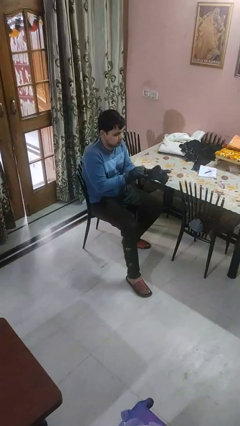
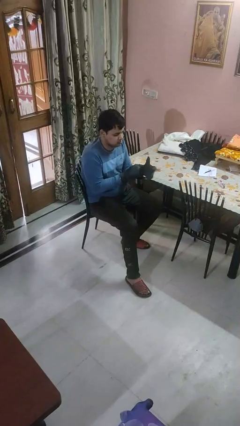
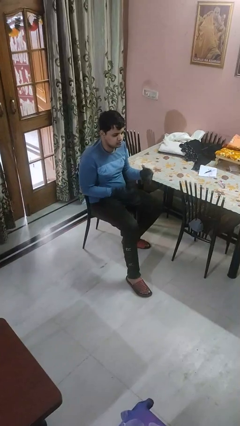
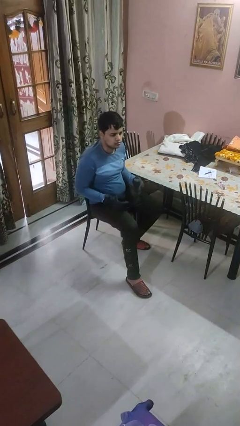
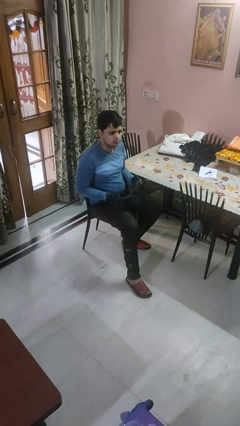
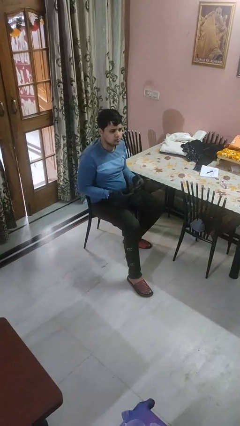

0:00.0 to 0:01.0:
person puts on gloves

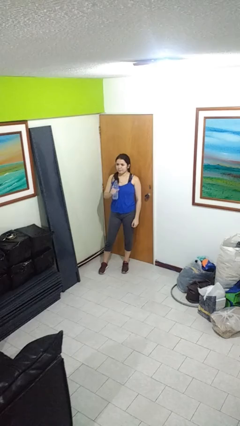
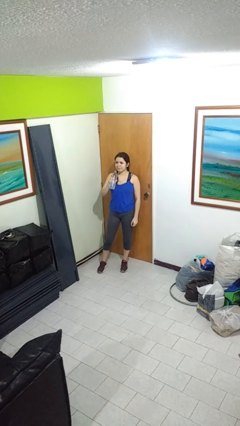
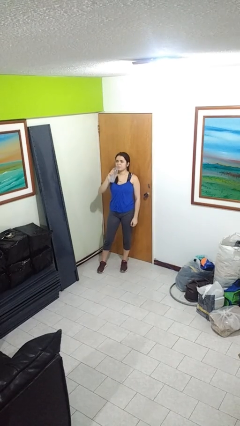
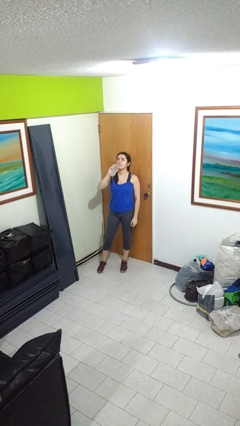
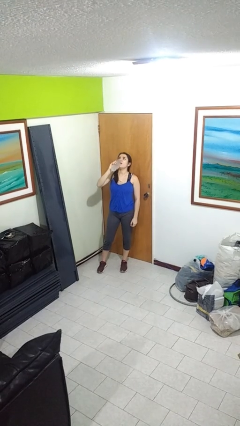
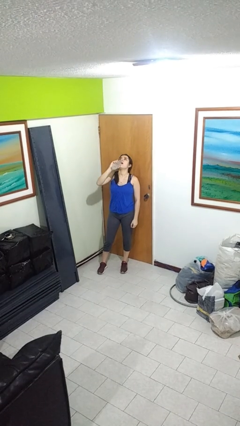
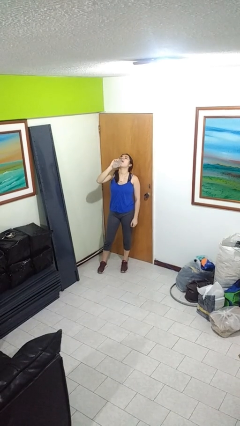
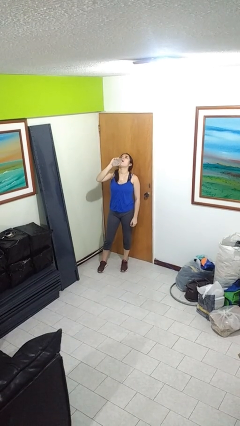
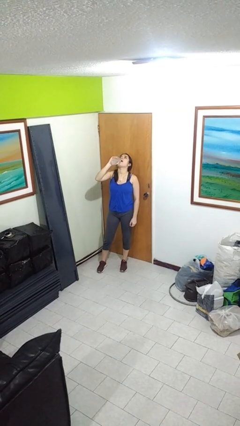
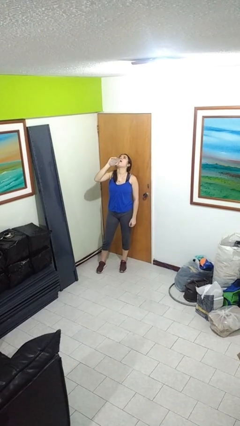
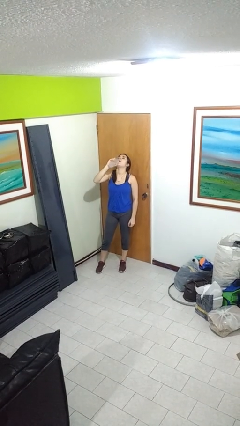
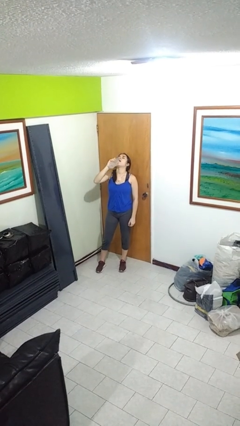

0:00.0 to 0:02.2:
person drinks from bottle

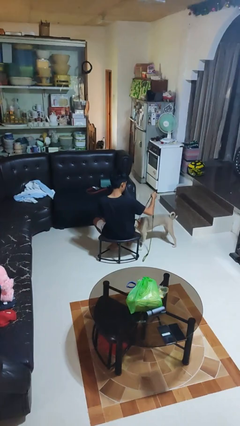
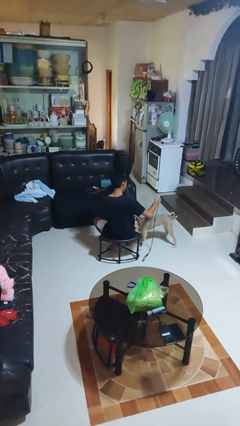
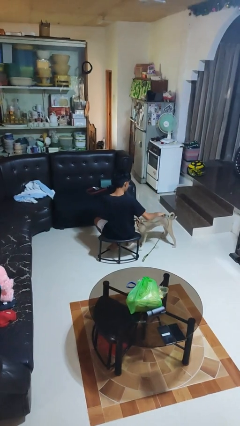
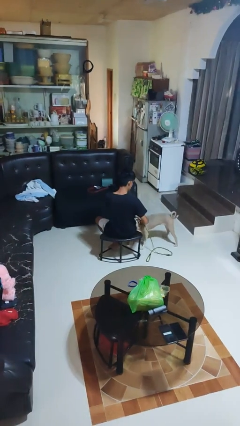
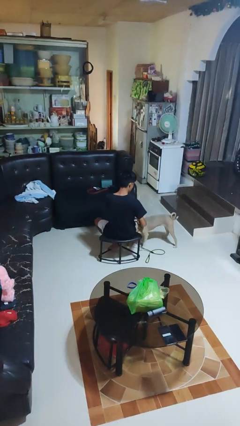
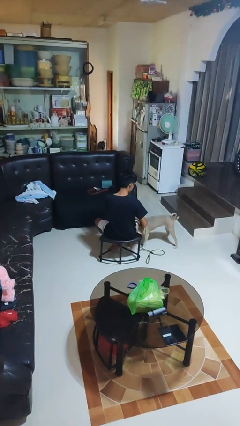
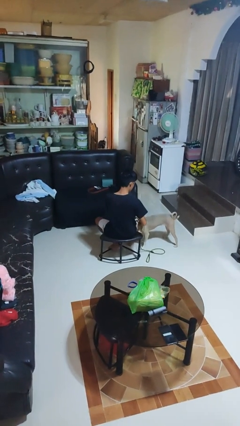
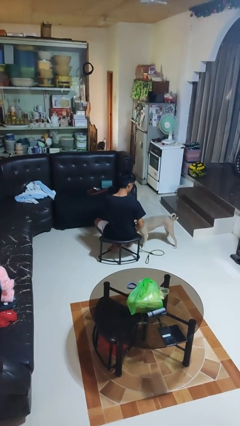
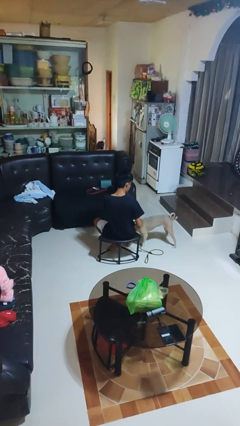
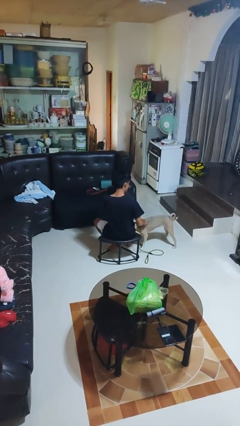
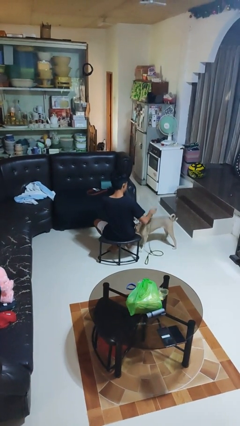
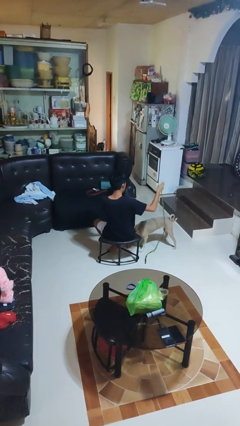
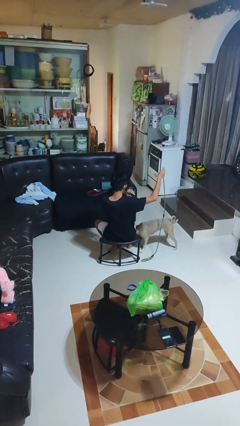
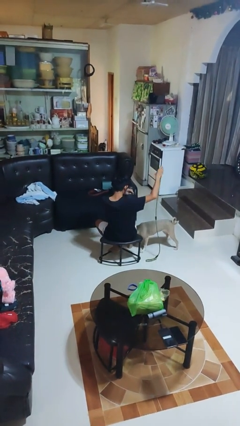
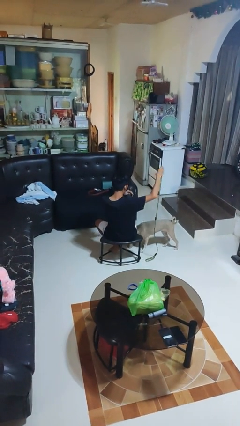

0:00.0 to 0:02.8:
person unattaches leash from dog

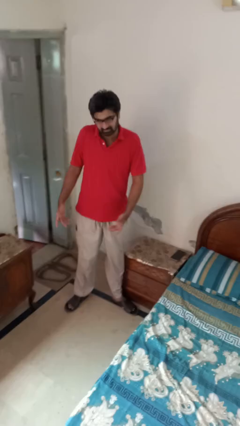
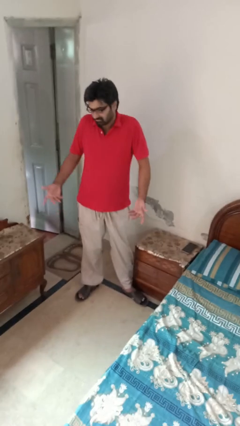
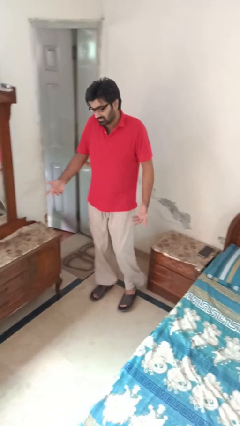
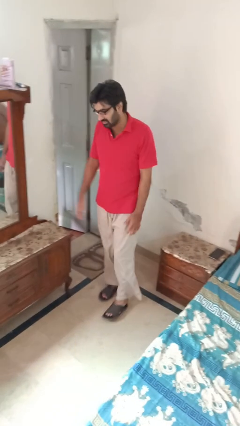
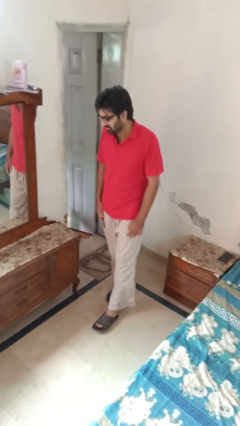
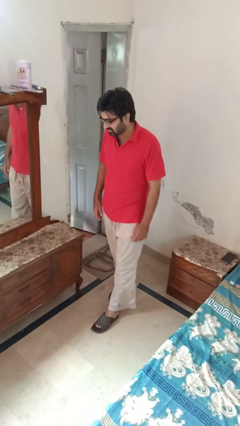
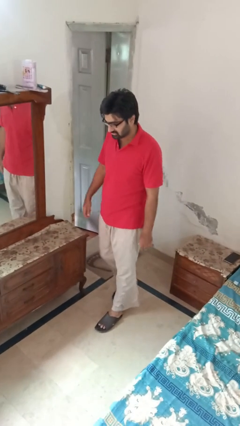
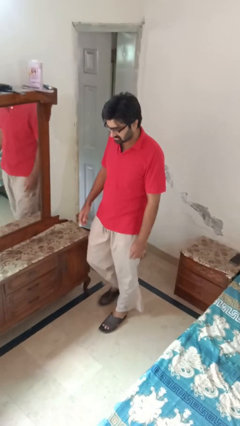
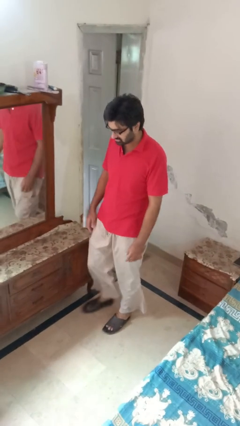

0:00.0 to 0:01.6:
person shrugs

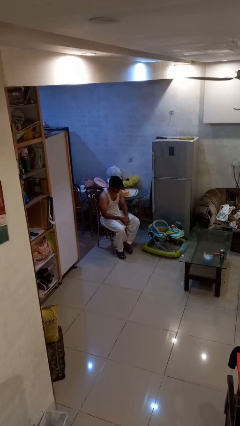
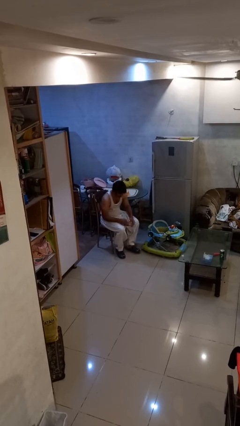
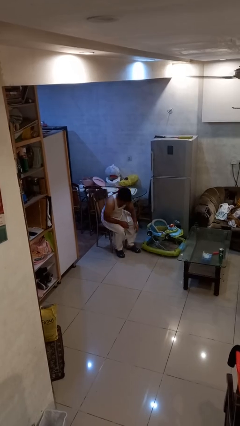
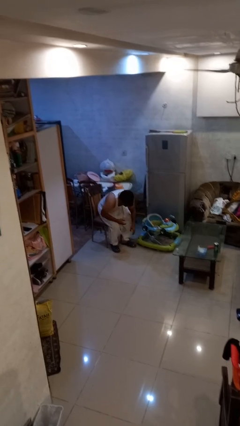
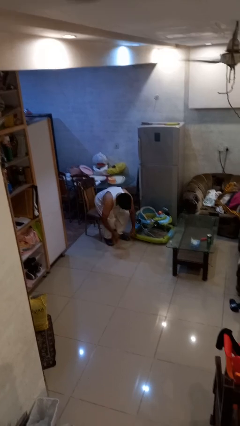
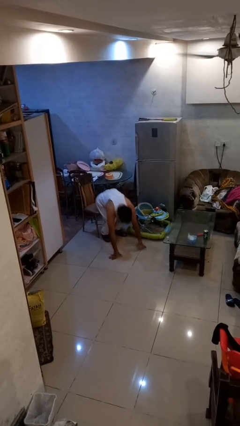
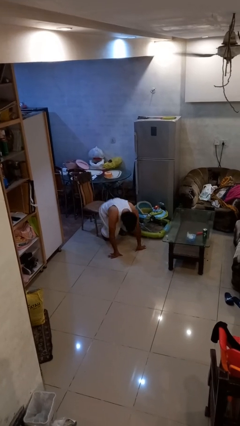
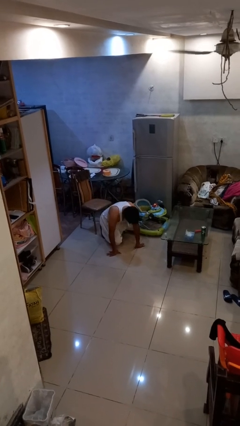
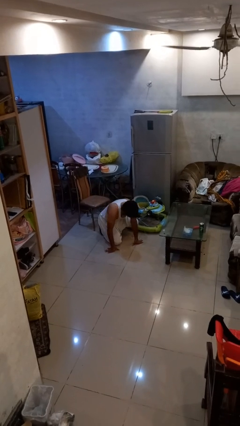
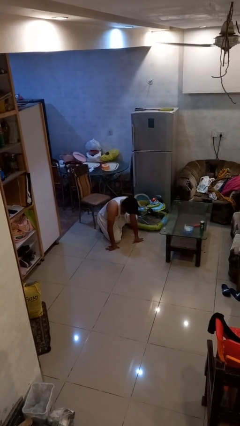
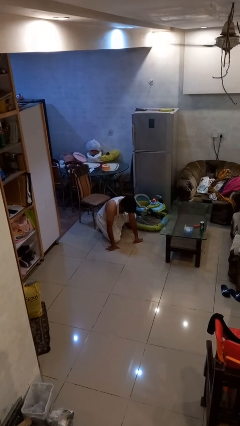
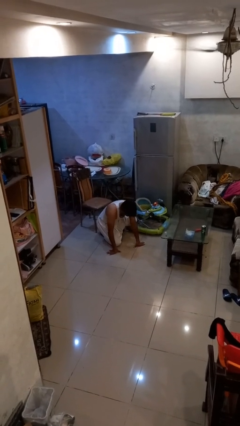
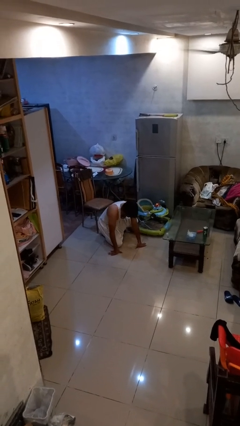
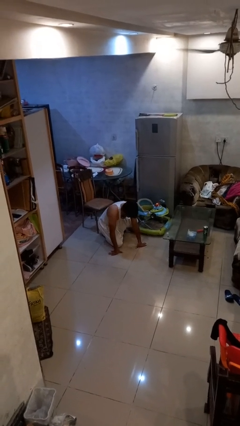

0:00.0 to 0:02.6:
person falls from chair

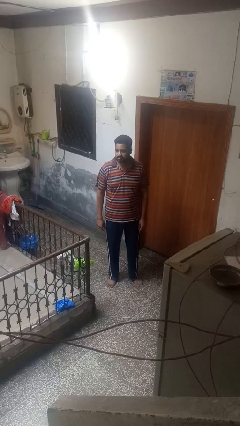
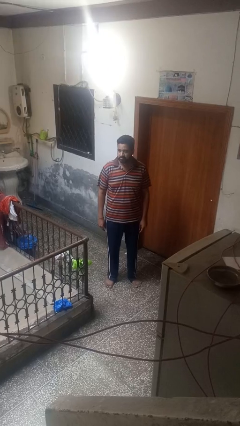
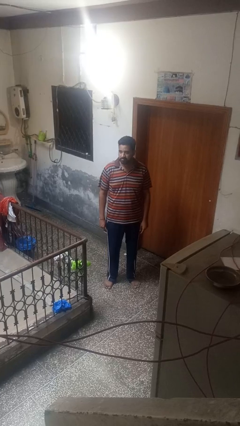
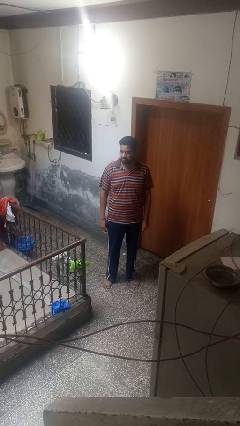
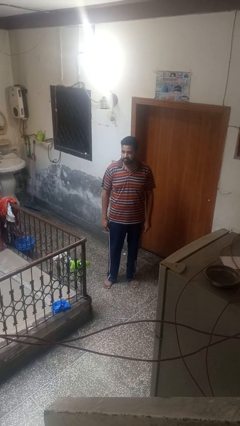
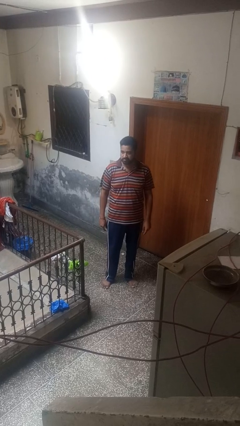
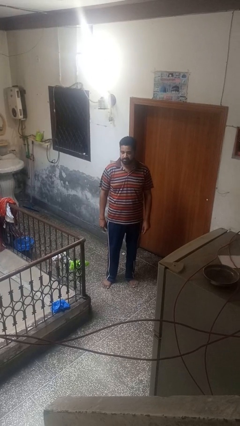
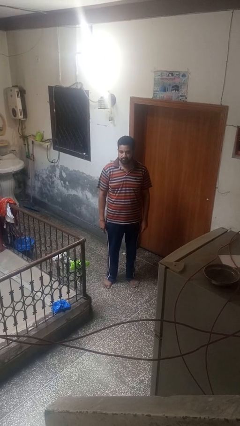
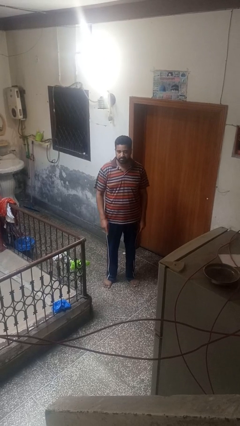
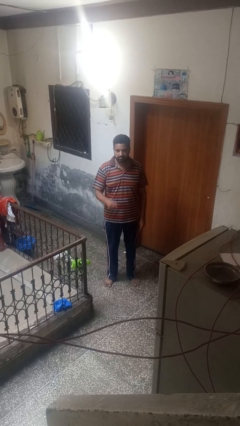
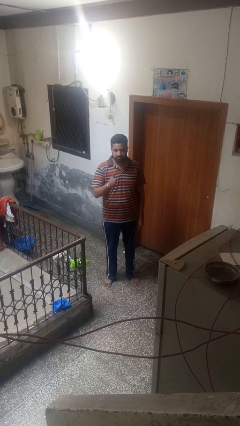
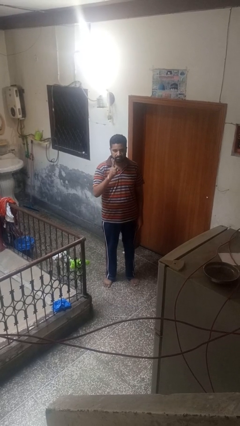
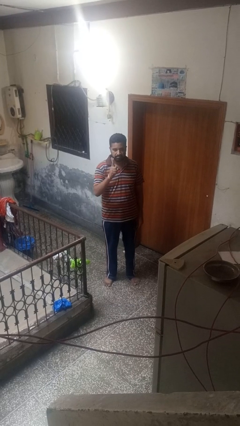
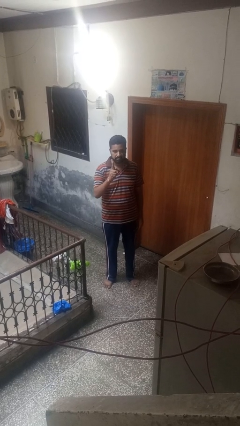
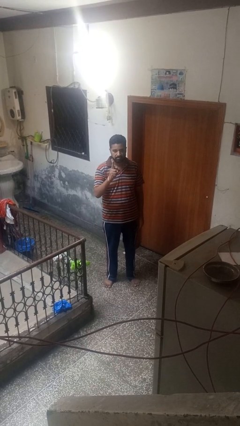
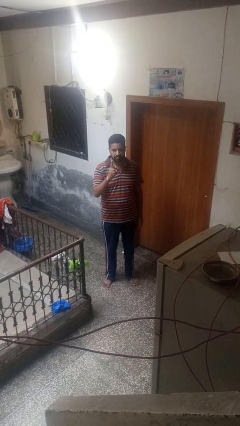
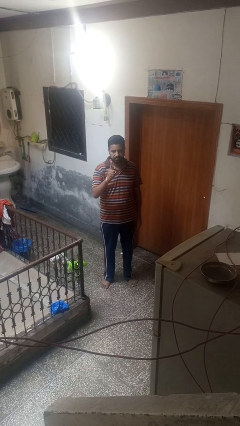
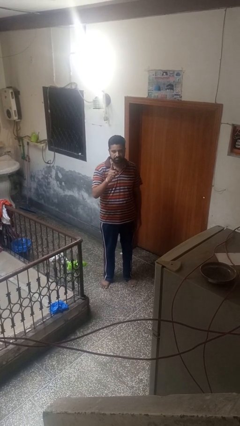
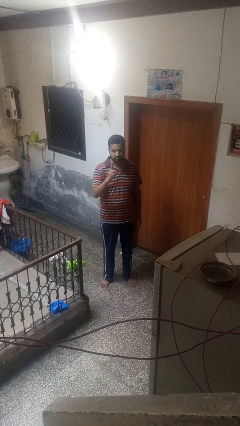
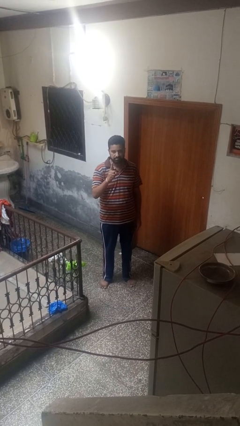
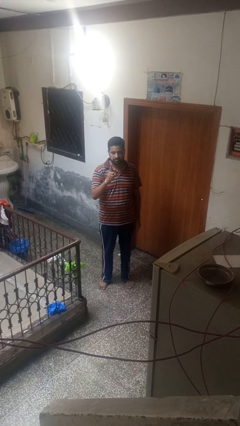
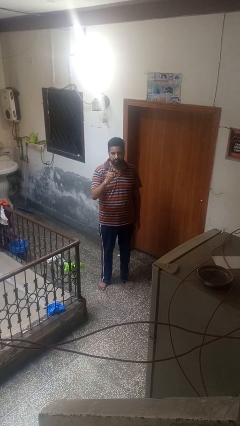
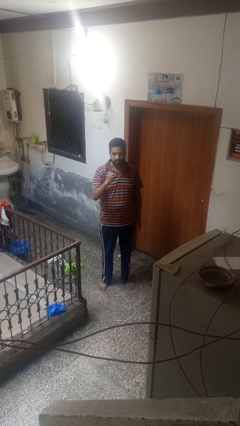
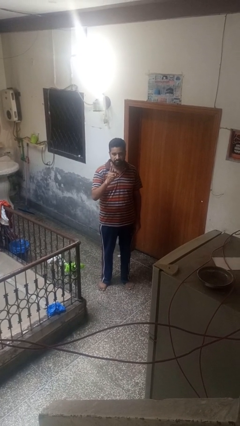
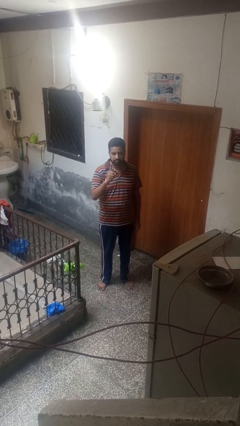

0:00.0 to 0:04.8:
person gestures number one

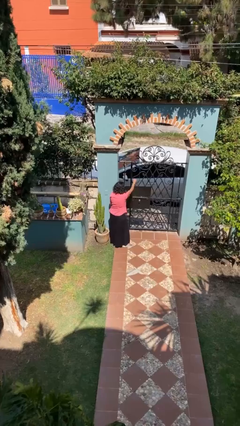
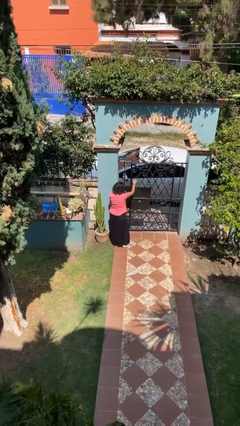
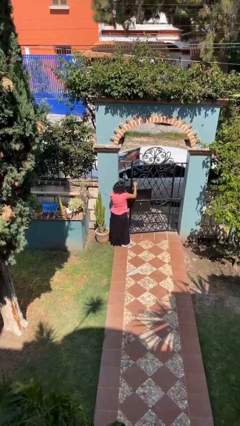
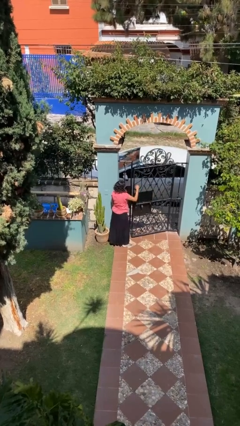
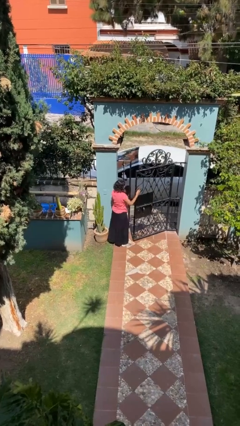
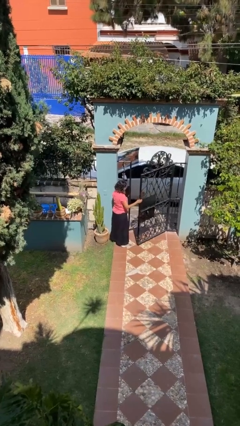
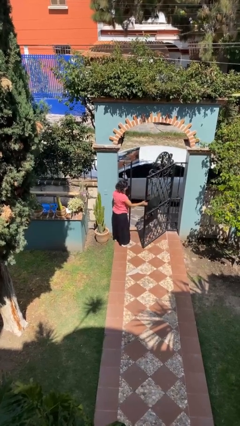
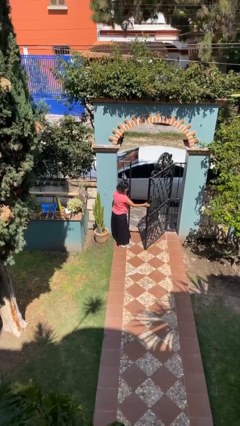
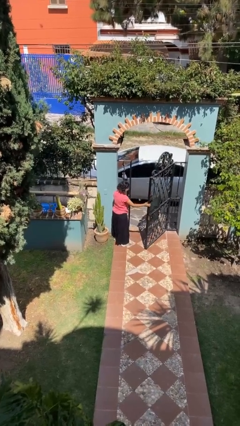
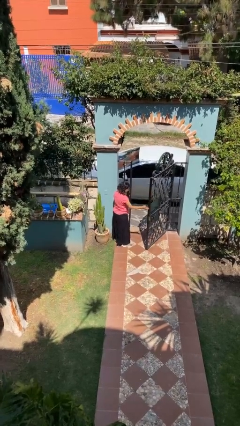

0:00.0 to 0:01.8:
person opens facility door

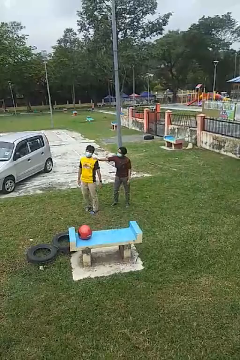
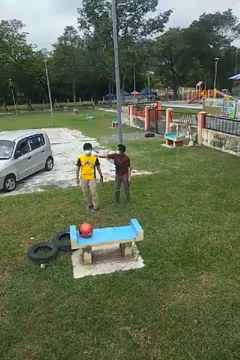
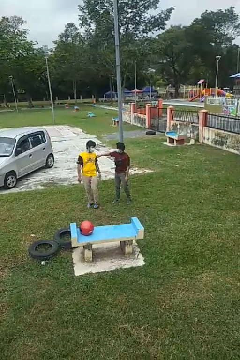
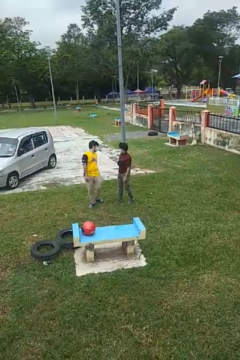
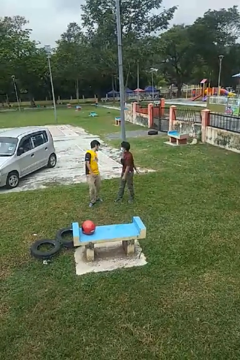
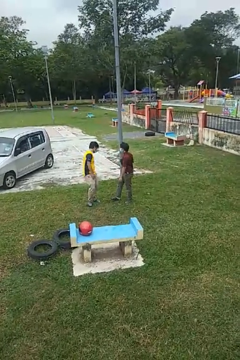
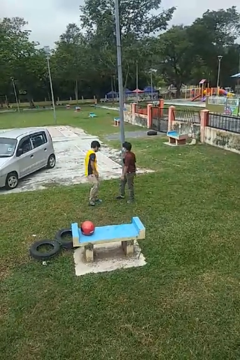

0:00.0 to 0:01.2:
person spins person around
